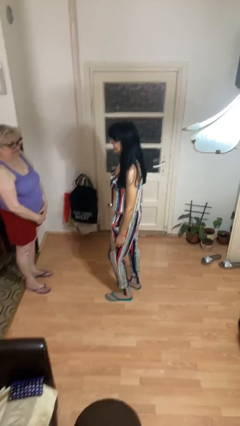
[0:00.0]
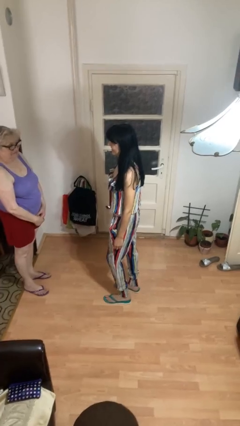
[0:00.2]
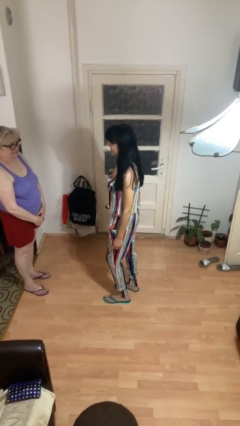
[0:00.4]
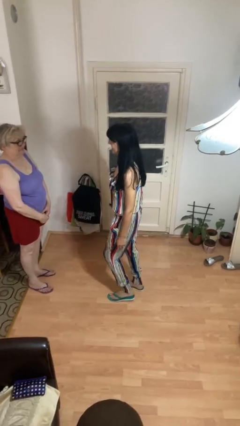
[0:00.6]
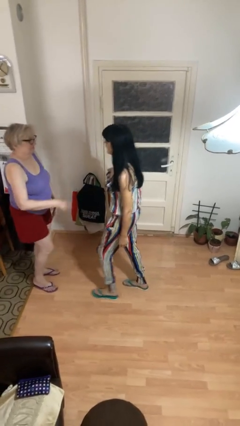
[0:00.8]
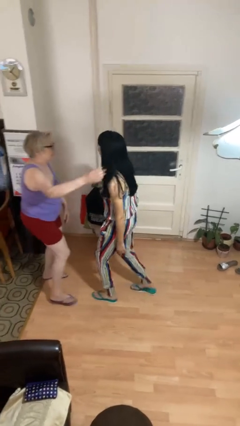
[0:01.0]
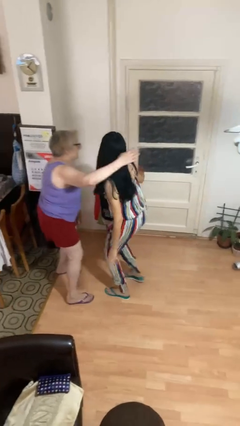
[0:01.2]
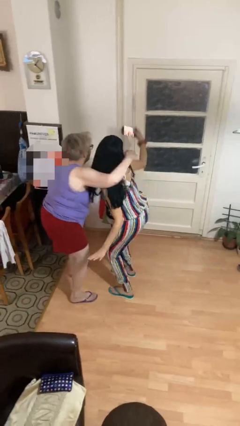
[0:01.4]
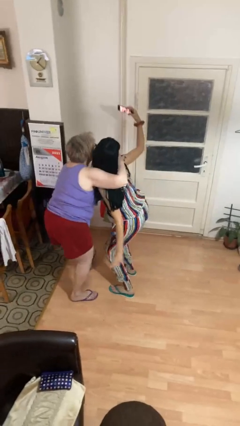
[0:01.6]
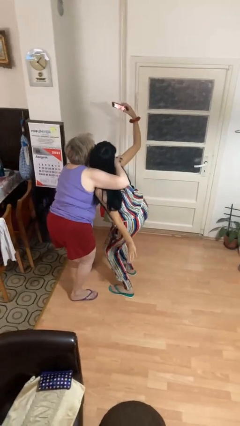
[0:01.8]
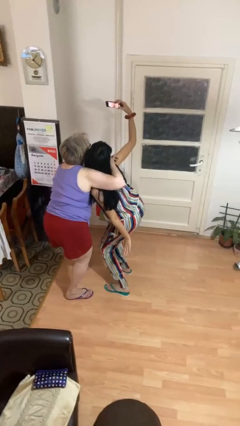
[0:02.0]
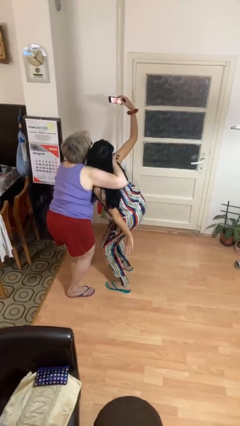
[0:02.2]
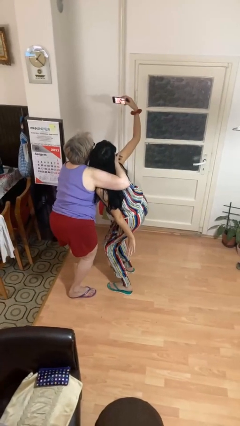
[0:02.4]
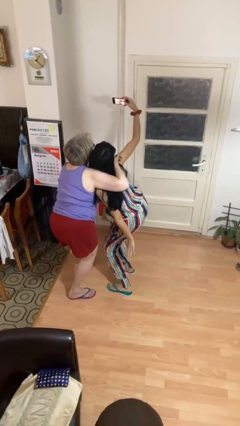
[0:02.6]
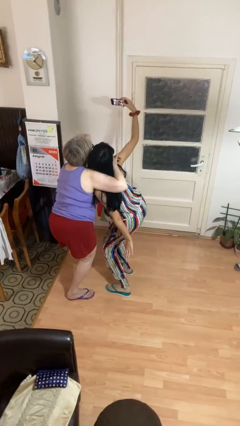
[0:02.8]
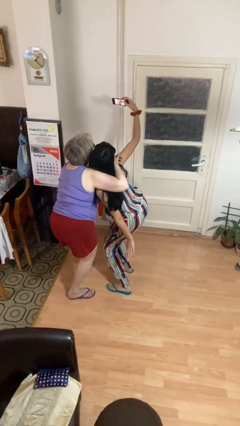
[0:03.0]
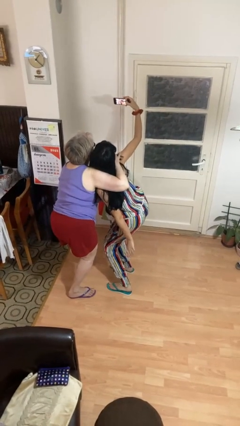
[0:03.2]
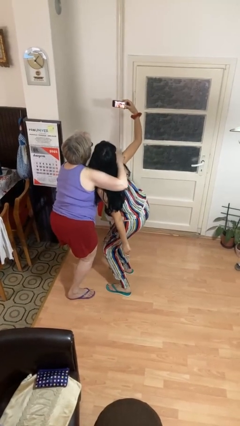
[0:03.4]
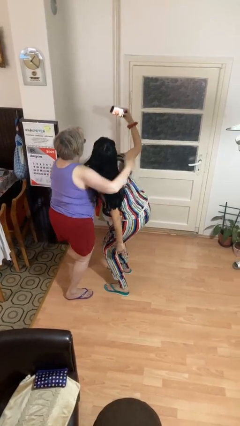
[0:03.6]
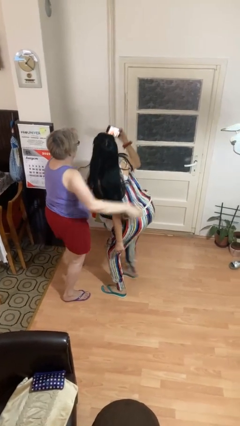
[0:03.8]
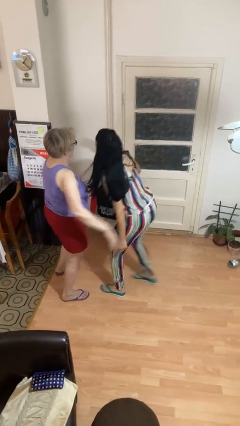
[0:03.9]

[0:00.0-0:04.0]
person takes selfie with person

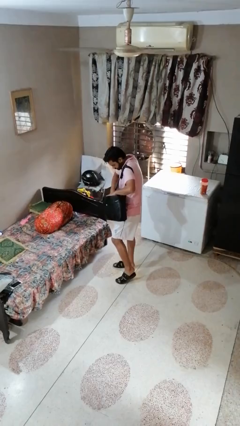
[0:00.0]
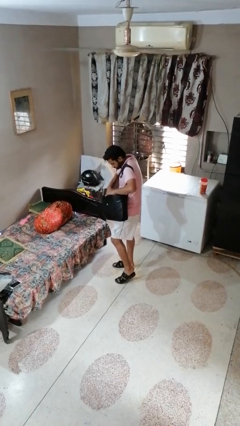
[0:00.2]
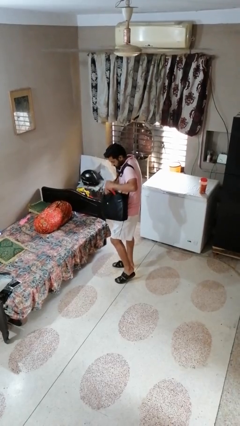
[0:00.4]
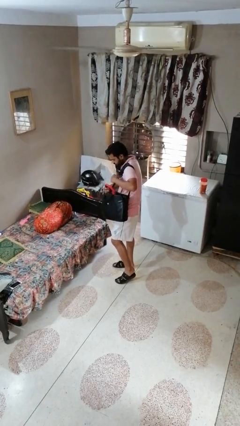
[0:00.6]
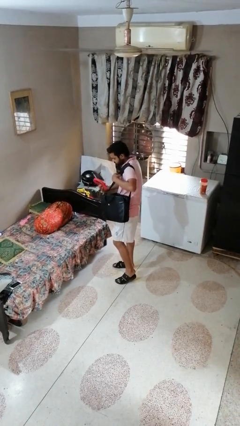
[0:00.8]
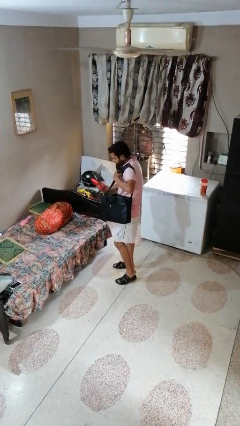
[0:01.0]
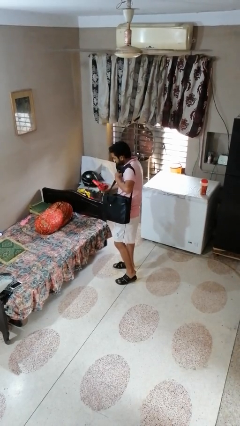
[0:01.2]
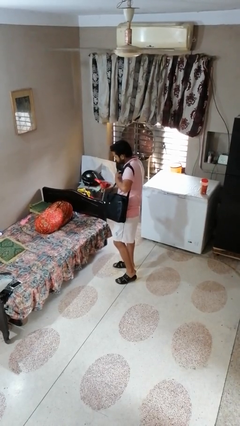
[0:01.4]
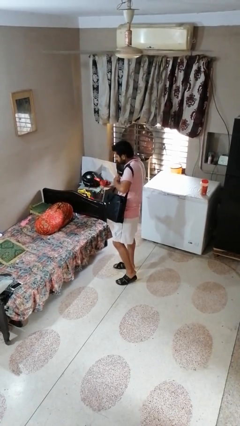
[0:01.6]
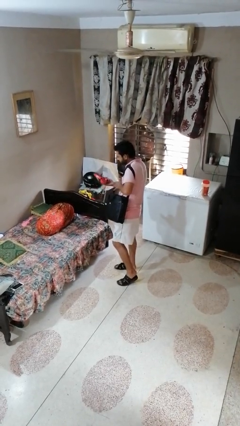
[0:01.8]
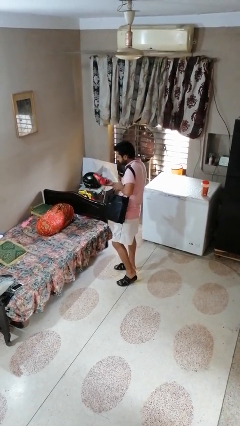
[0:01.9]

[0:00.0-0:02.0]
person takes object from backpack

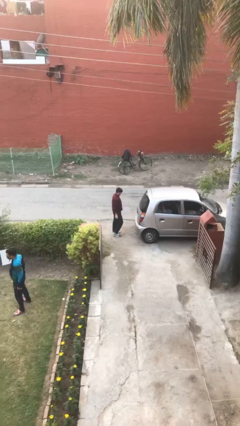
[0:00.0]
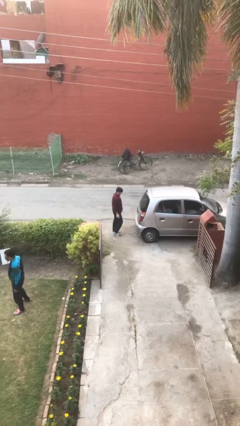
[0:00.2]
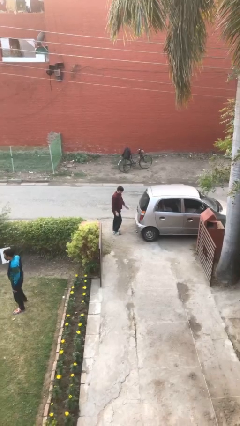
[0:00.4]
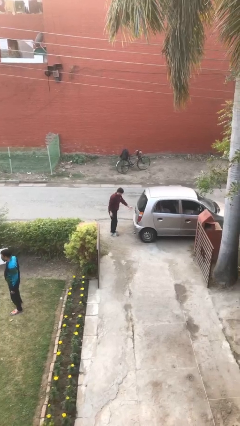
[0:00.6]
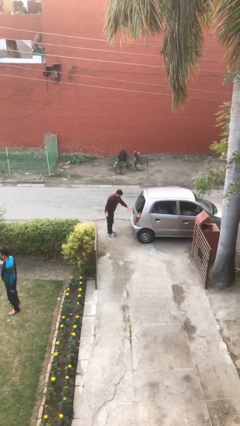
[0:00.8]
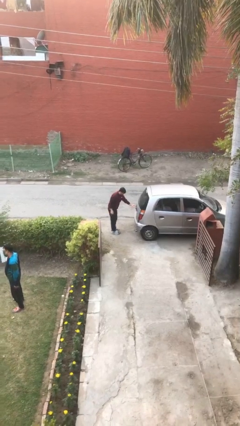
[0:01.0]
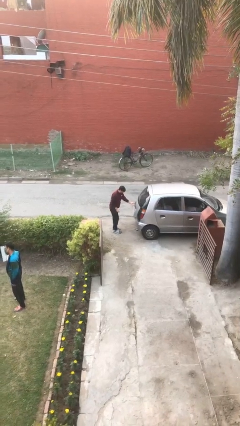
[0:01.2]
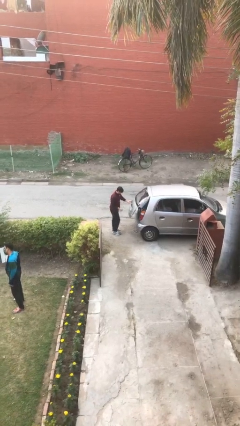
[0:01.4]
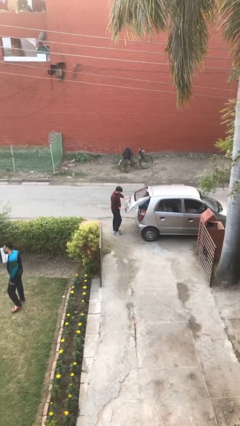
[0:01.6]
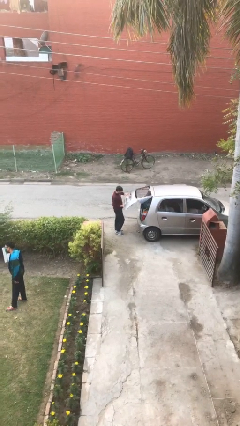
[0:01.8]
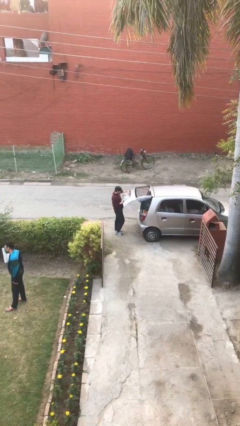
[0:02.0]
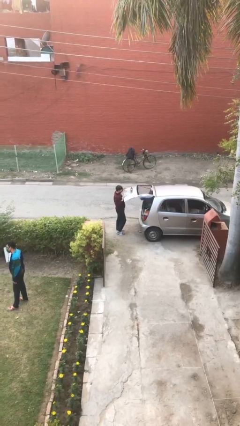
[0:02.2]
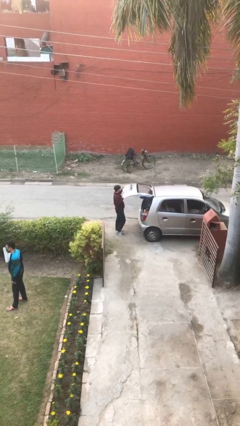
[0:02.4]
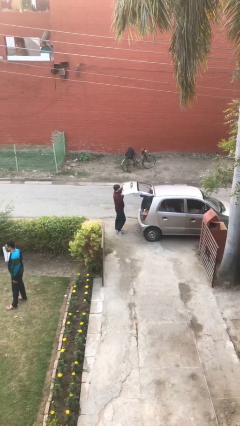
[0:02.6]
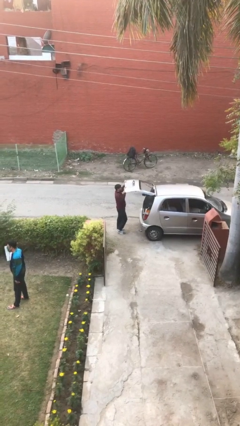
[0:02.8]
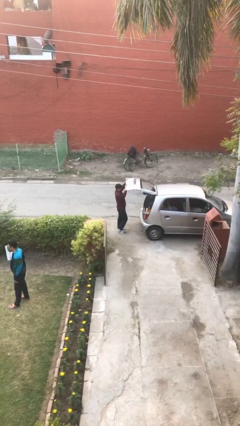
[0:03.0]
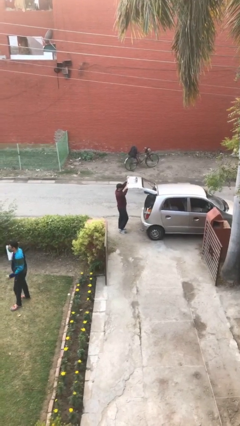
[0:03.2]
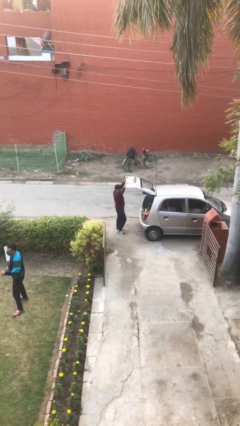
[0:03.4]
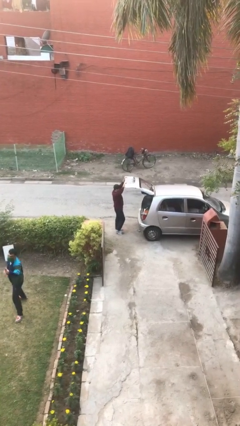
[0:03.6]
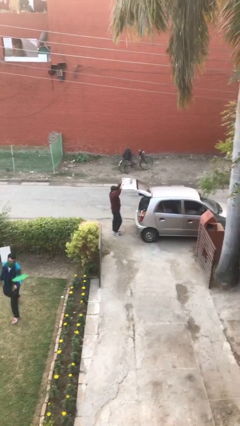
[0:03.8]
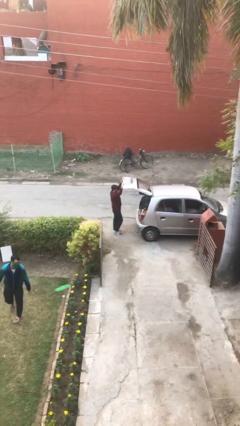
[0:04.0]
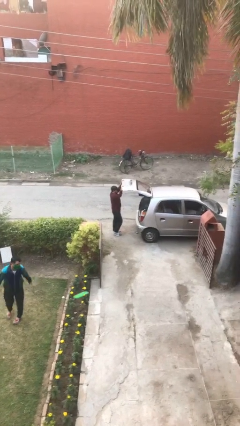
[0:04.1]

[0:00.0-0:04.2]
person opens car trunk

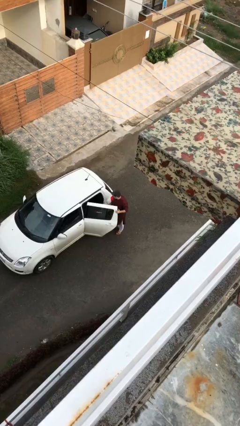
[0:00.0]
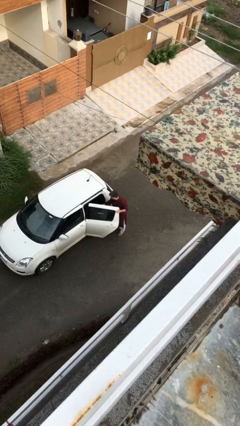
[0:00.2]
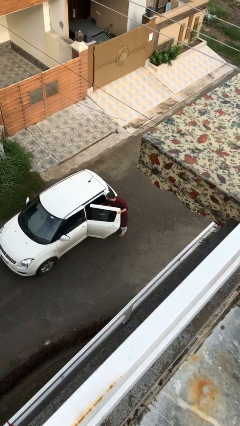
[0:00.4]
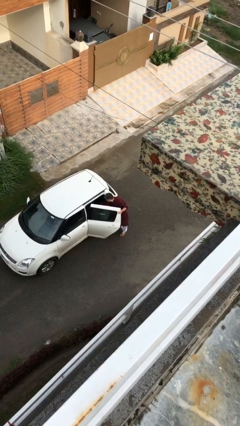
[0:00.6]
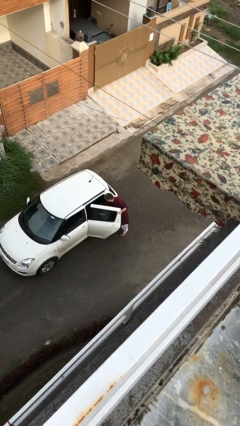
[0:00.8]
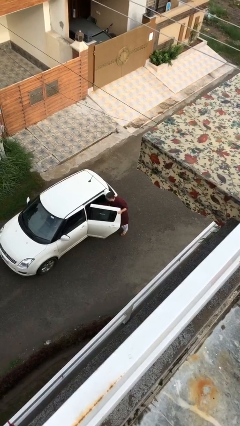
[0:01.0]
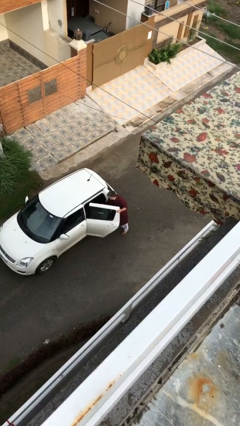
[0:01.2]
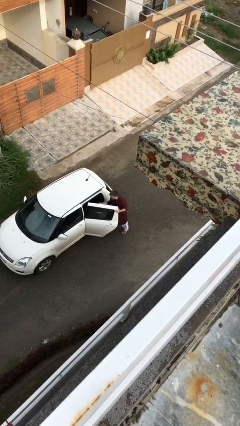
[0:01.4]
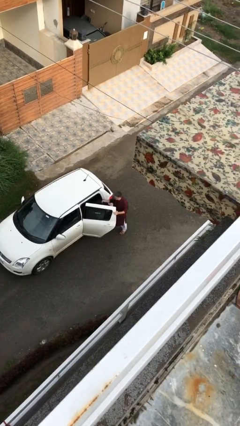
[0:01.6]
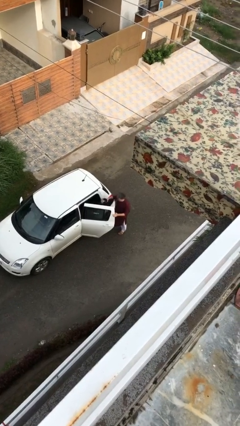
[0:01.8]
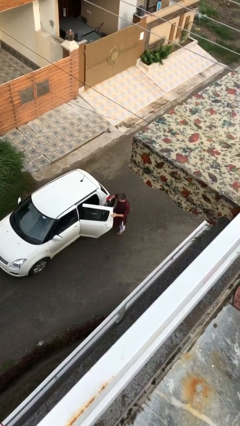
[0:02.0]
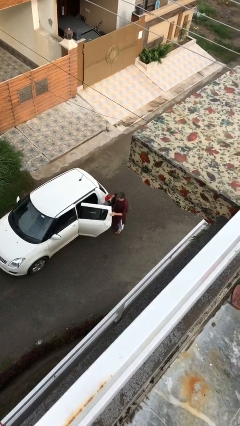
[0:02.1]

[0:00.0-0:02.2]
person unloads car

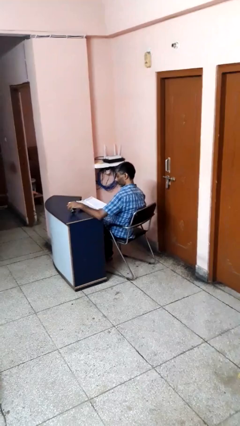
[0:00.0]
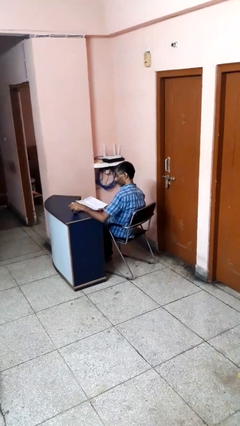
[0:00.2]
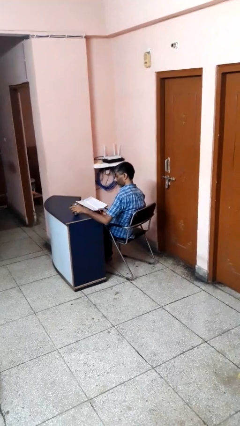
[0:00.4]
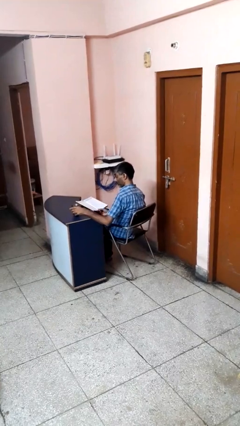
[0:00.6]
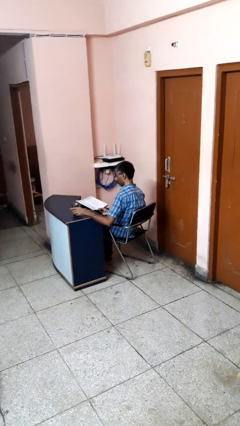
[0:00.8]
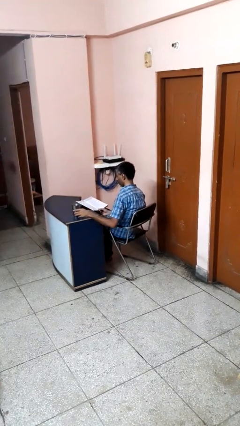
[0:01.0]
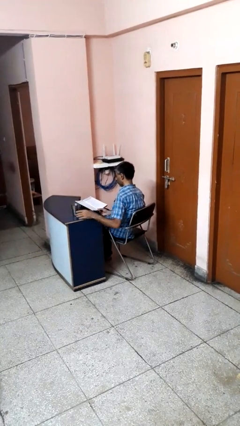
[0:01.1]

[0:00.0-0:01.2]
person sets upright glass

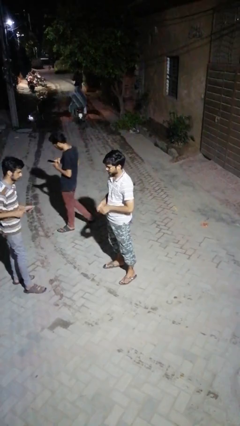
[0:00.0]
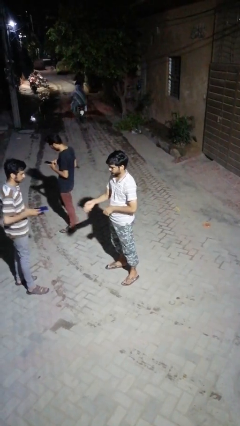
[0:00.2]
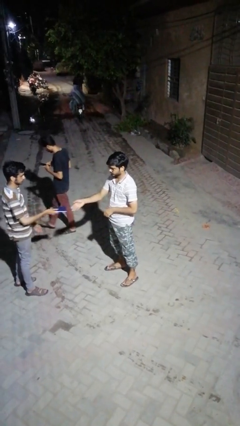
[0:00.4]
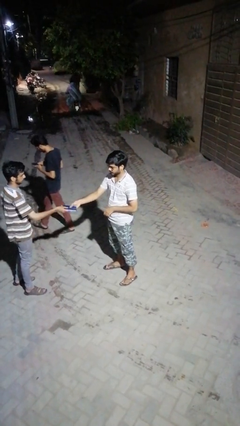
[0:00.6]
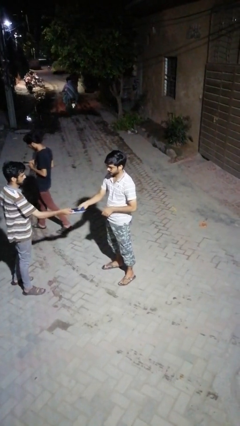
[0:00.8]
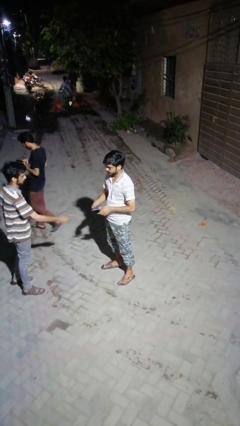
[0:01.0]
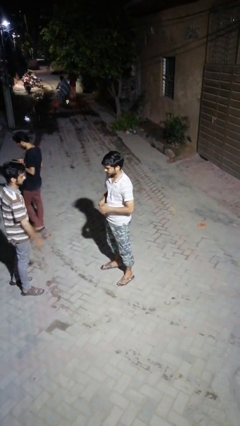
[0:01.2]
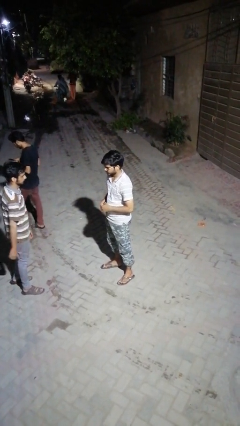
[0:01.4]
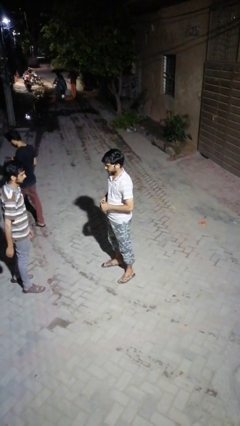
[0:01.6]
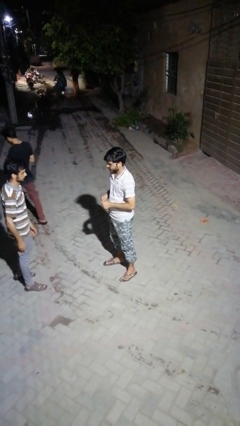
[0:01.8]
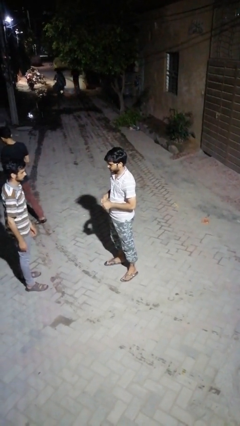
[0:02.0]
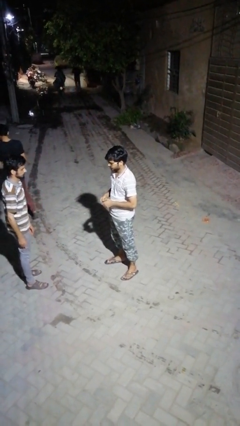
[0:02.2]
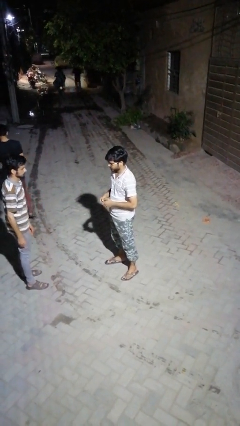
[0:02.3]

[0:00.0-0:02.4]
person transfers object to person

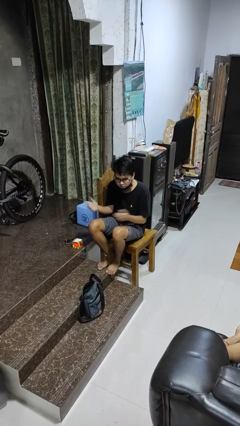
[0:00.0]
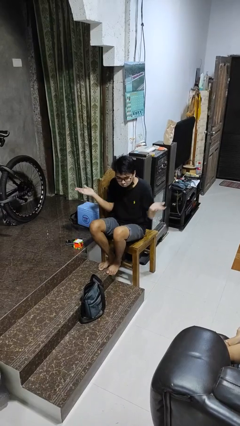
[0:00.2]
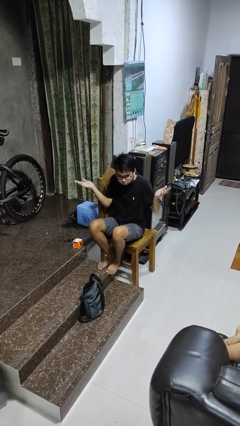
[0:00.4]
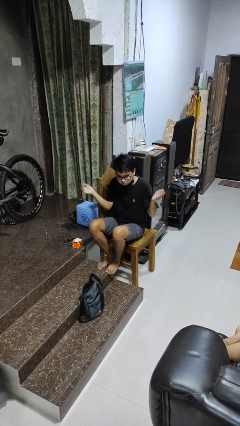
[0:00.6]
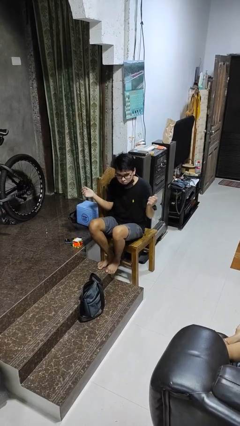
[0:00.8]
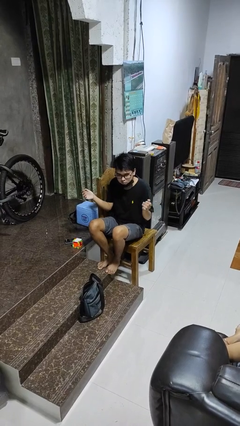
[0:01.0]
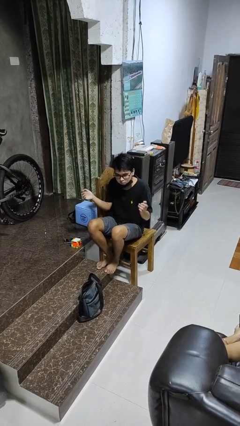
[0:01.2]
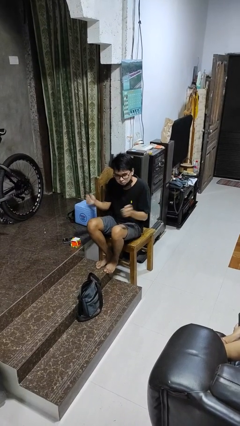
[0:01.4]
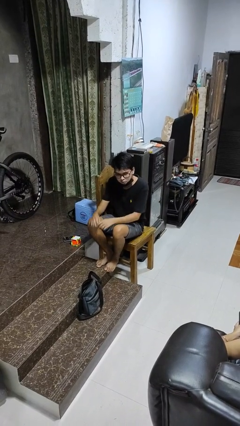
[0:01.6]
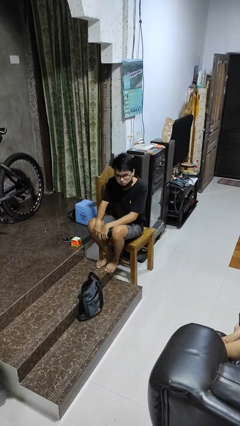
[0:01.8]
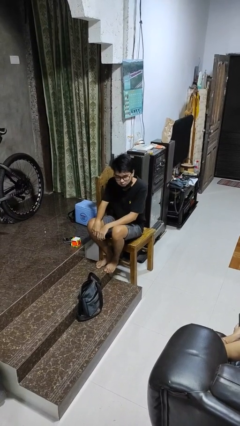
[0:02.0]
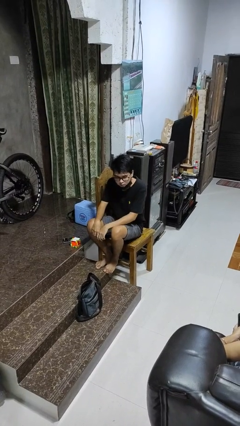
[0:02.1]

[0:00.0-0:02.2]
person shrugs
